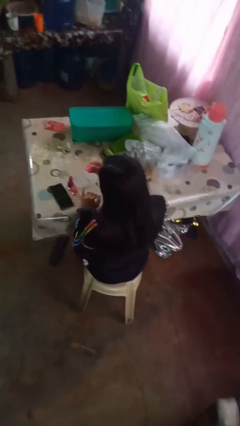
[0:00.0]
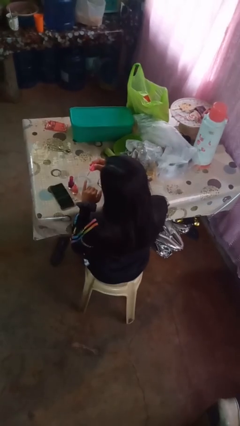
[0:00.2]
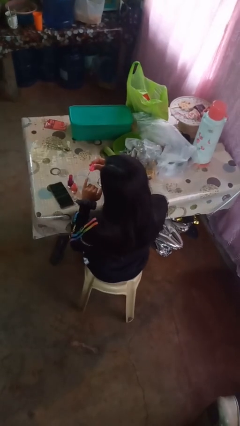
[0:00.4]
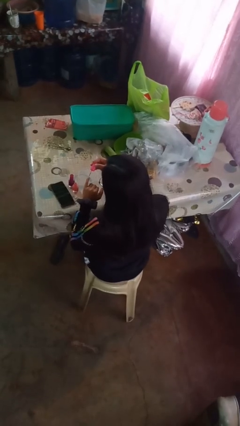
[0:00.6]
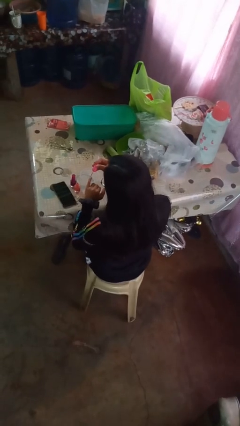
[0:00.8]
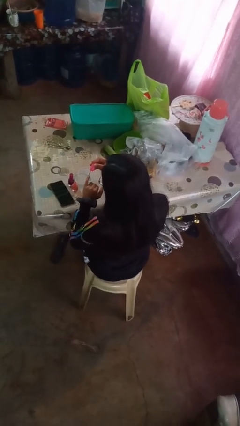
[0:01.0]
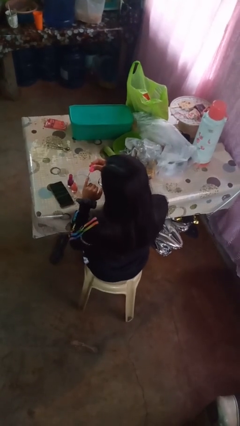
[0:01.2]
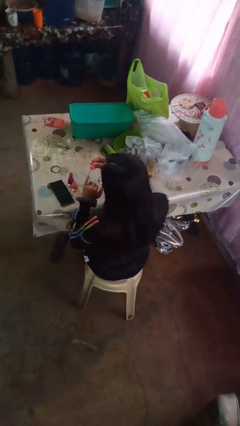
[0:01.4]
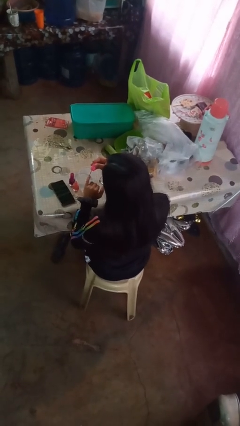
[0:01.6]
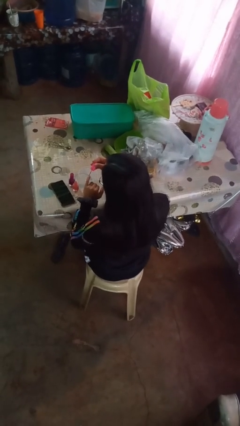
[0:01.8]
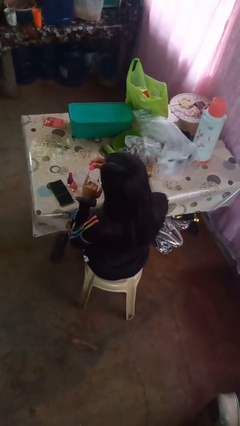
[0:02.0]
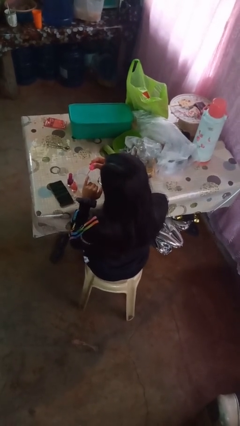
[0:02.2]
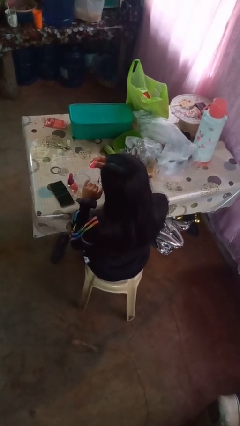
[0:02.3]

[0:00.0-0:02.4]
person paints fingernails

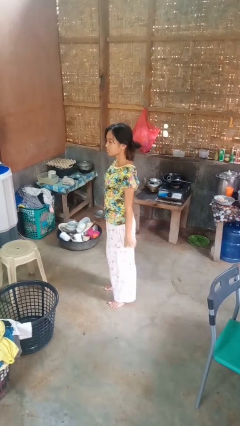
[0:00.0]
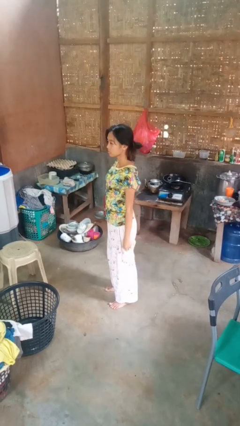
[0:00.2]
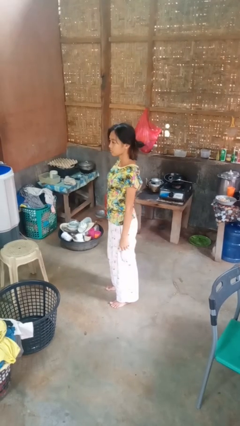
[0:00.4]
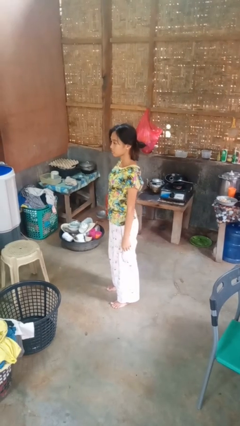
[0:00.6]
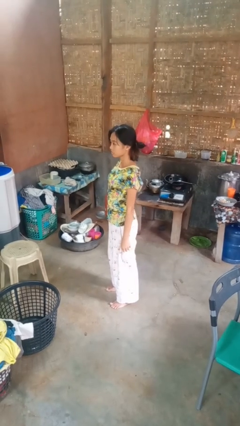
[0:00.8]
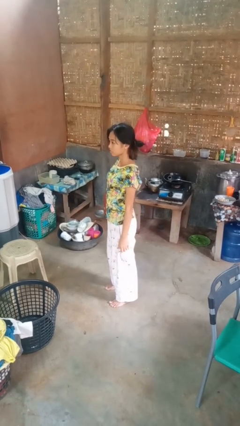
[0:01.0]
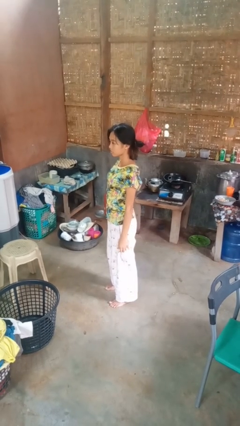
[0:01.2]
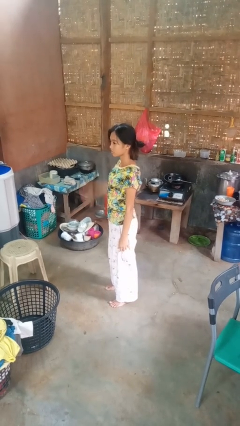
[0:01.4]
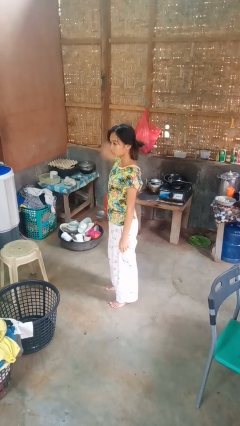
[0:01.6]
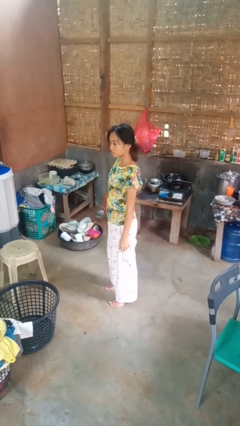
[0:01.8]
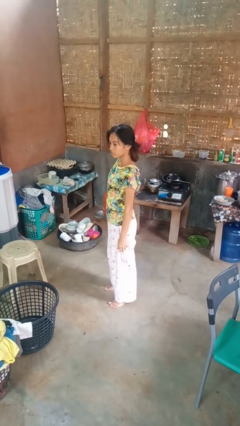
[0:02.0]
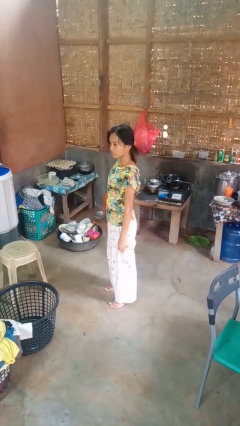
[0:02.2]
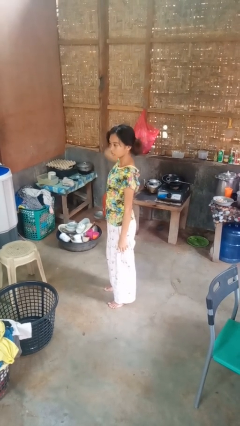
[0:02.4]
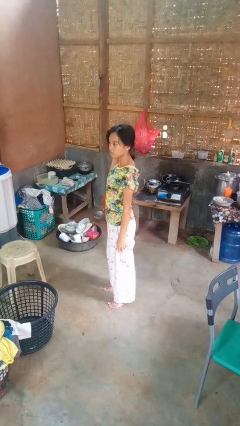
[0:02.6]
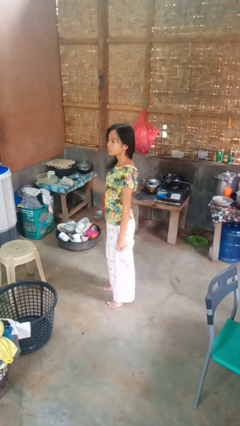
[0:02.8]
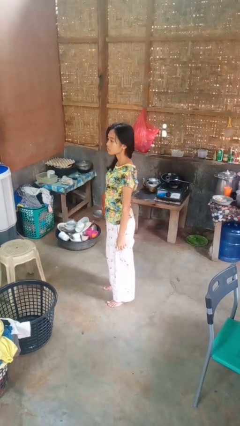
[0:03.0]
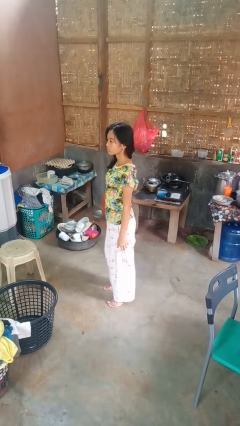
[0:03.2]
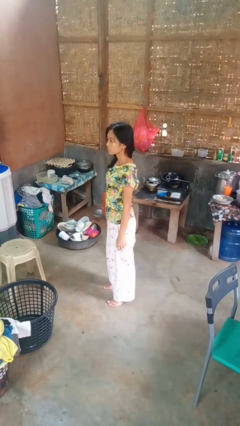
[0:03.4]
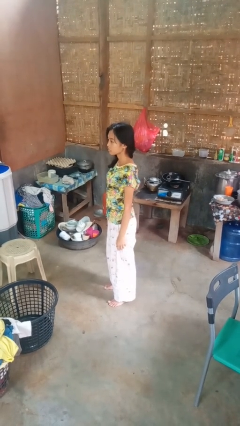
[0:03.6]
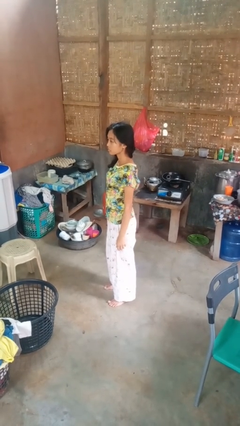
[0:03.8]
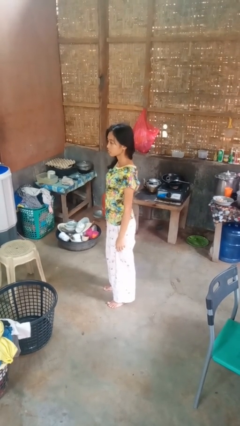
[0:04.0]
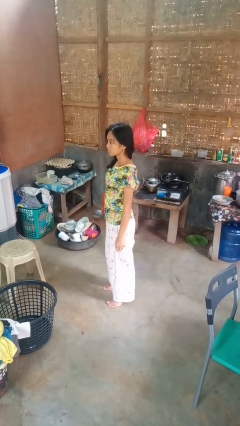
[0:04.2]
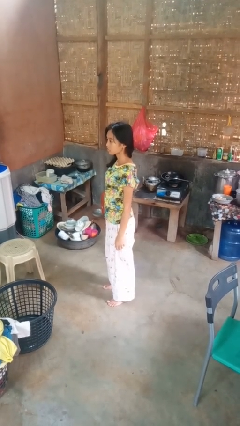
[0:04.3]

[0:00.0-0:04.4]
person takes off hairtie

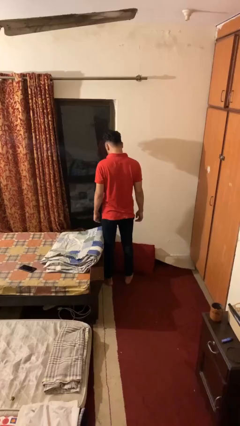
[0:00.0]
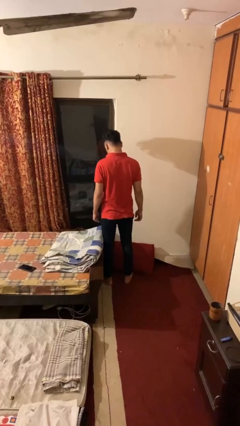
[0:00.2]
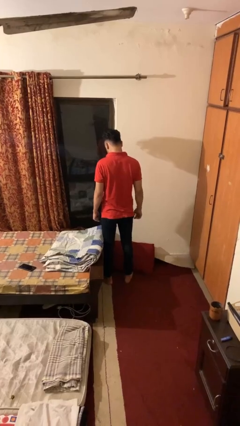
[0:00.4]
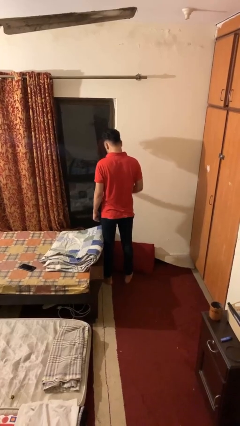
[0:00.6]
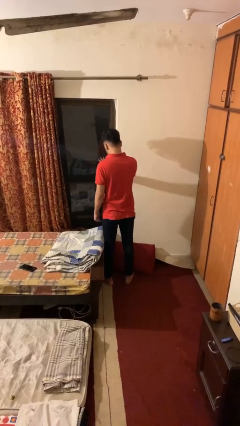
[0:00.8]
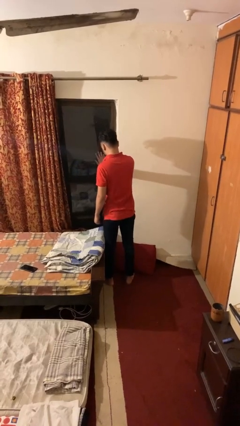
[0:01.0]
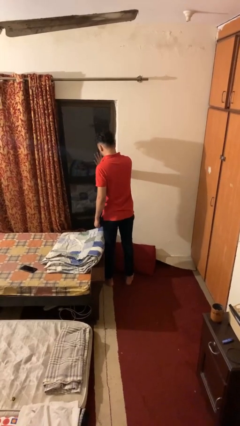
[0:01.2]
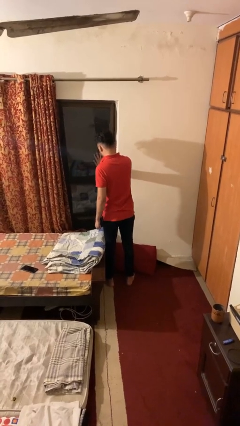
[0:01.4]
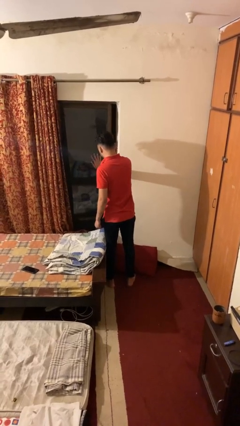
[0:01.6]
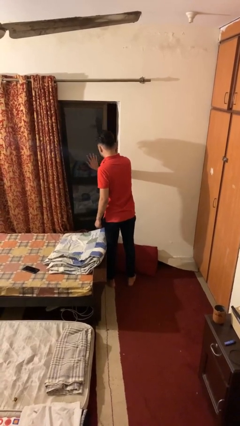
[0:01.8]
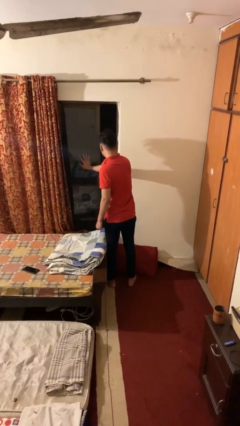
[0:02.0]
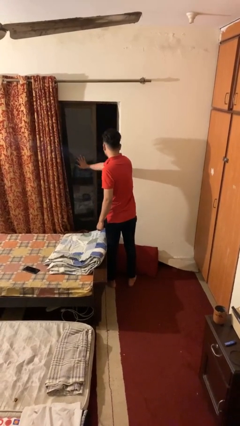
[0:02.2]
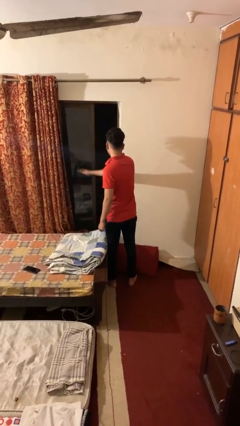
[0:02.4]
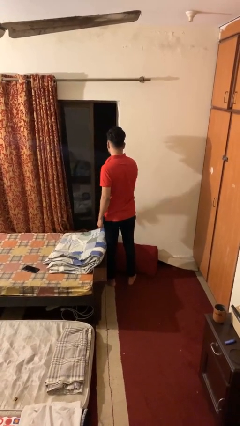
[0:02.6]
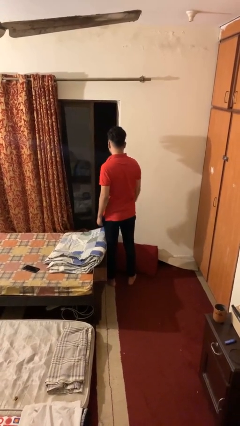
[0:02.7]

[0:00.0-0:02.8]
person opens home window

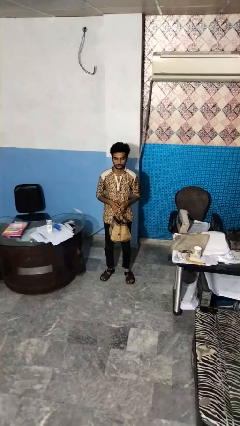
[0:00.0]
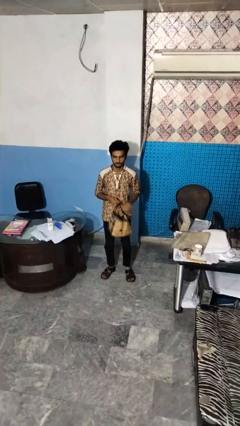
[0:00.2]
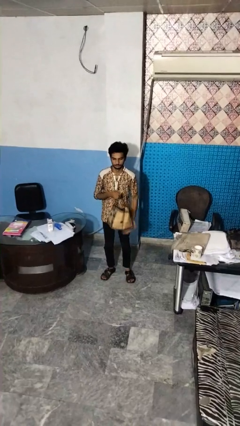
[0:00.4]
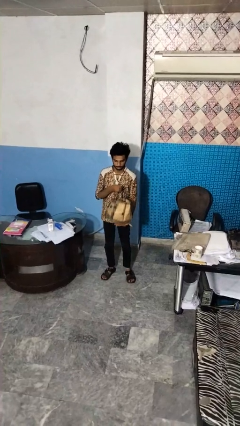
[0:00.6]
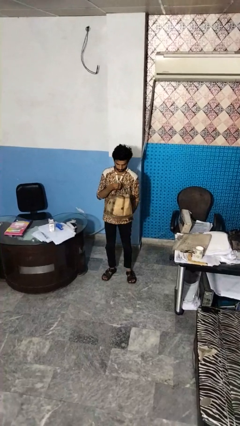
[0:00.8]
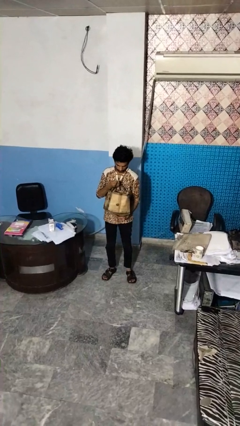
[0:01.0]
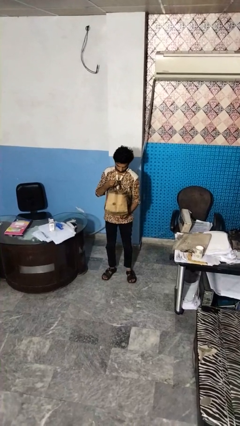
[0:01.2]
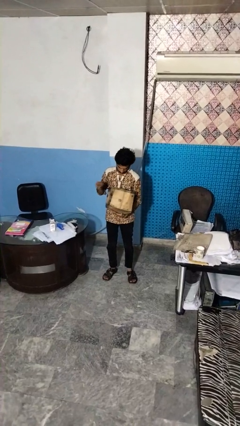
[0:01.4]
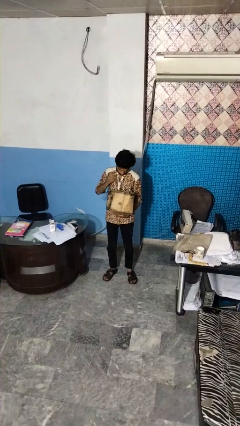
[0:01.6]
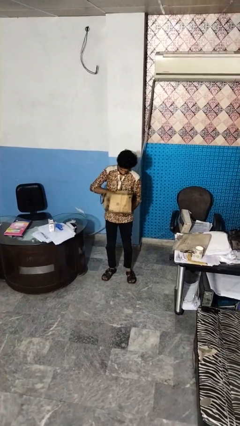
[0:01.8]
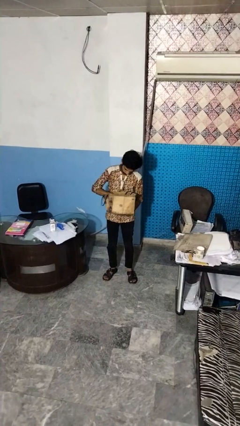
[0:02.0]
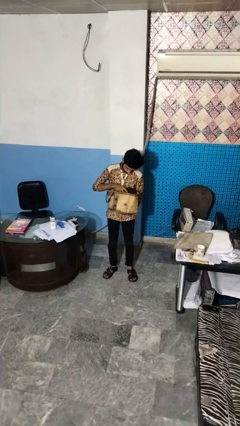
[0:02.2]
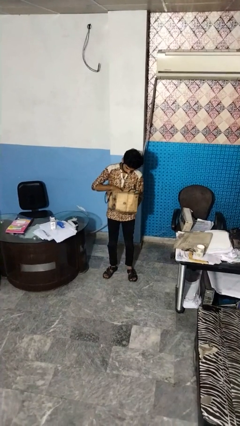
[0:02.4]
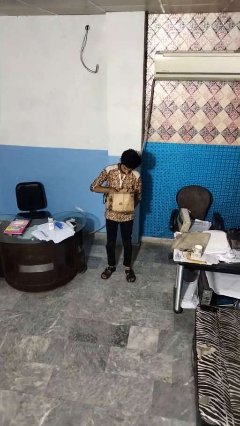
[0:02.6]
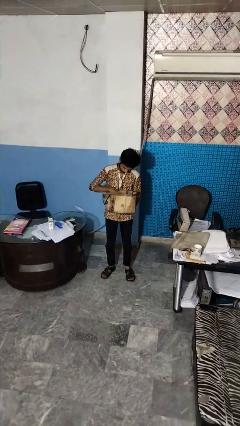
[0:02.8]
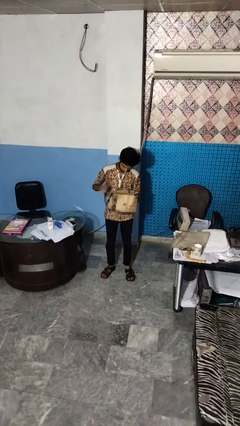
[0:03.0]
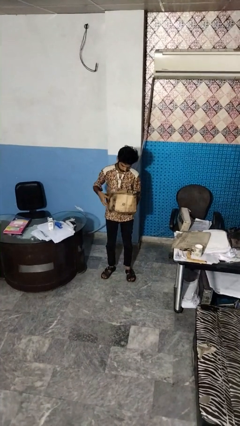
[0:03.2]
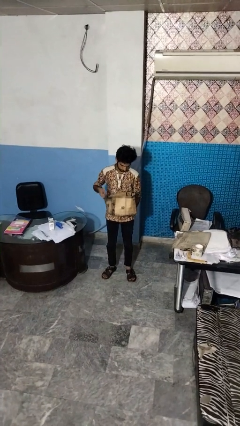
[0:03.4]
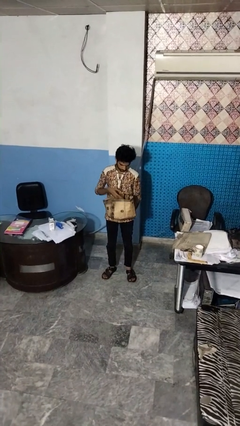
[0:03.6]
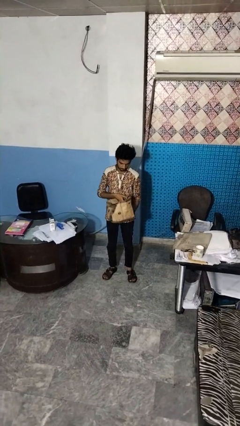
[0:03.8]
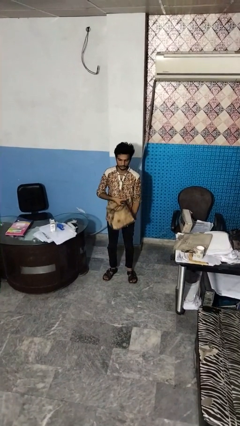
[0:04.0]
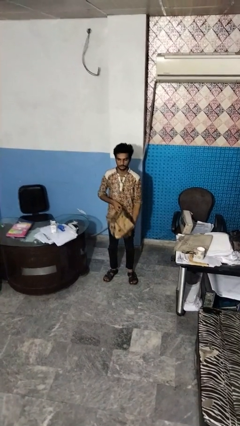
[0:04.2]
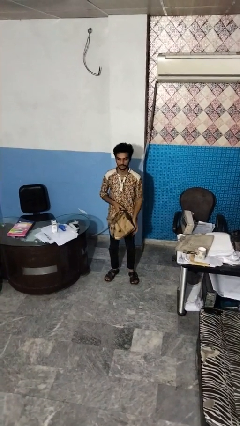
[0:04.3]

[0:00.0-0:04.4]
person searches in bag

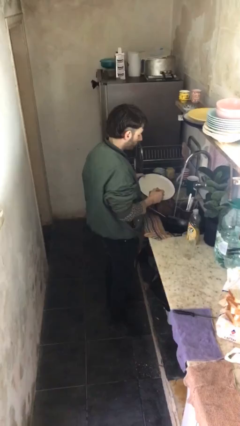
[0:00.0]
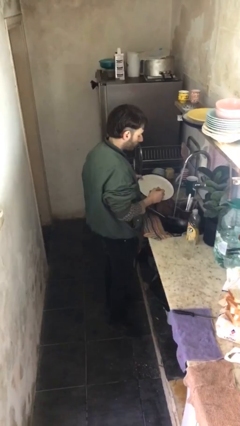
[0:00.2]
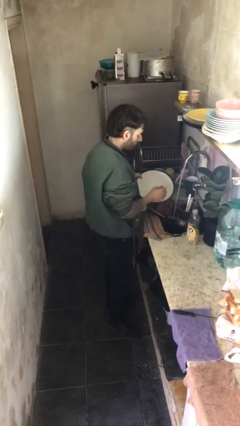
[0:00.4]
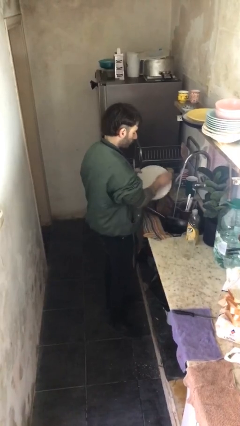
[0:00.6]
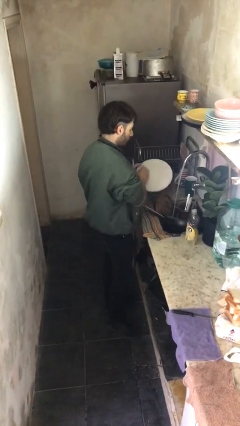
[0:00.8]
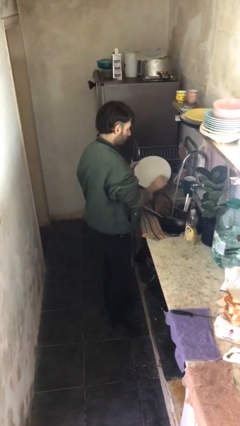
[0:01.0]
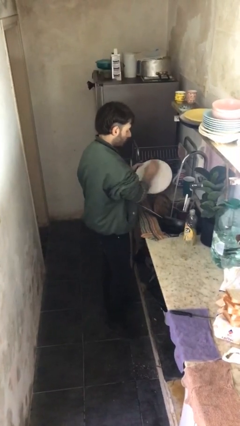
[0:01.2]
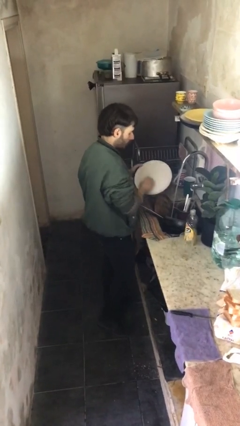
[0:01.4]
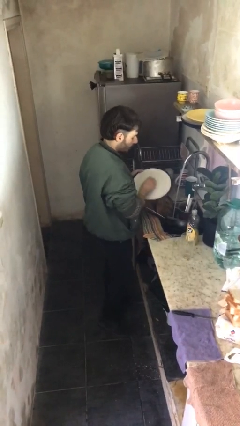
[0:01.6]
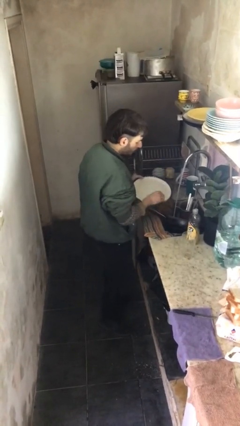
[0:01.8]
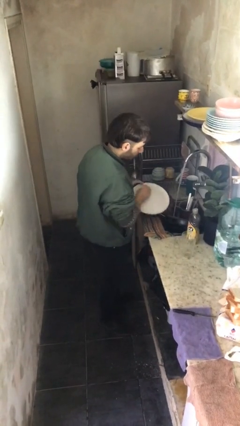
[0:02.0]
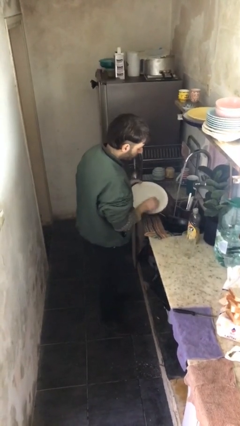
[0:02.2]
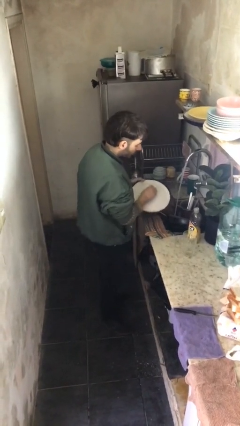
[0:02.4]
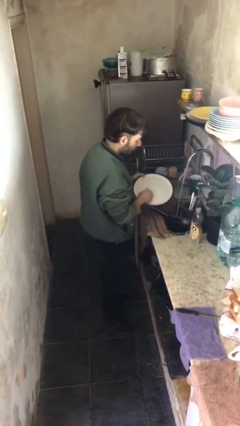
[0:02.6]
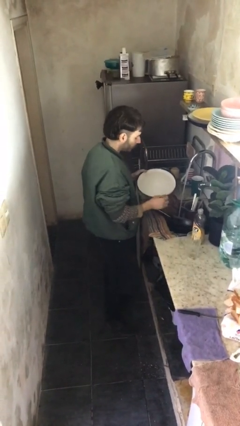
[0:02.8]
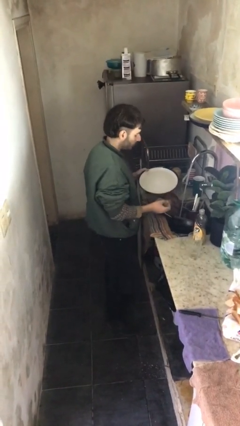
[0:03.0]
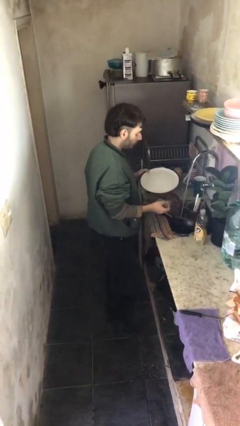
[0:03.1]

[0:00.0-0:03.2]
person washes dish

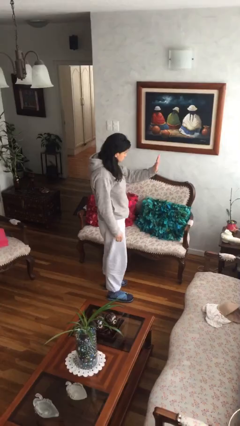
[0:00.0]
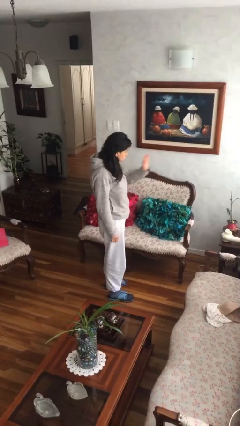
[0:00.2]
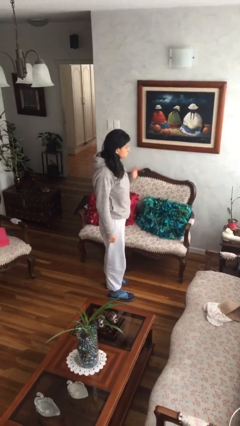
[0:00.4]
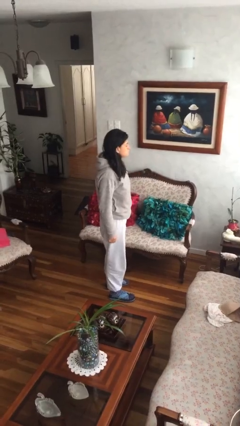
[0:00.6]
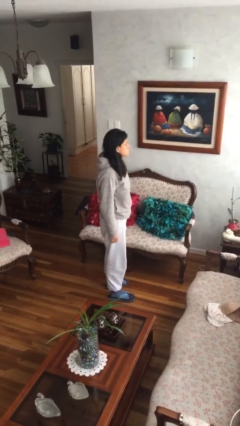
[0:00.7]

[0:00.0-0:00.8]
person gestures stop
